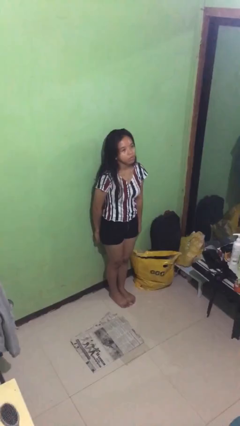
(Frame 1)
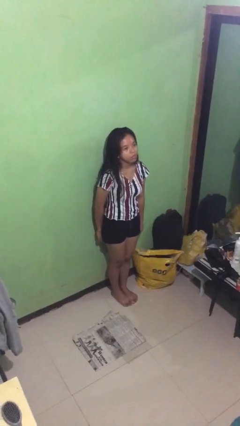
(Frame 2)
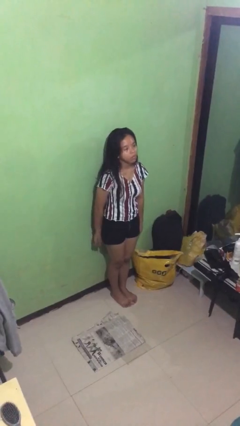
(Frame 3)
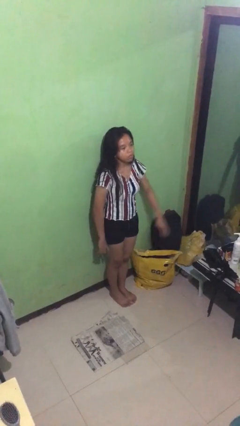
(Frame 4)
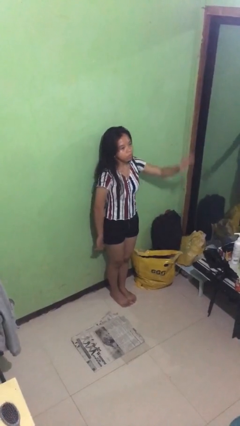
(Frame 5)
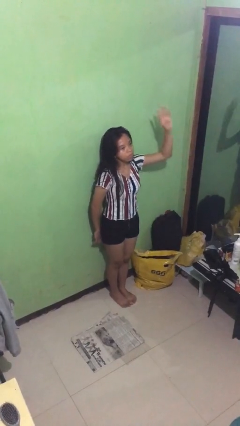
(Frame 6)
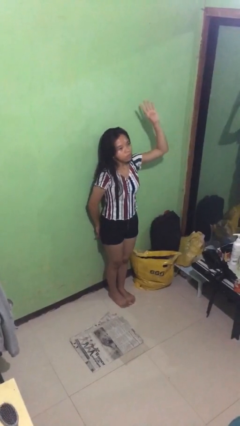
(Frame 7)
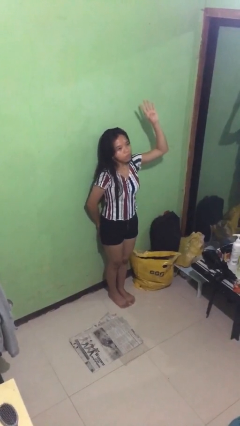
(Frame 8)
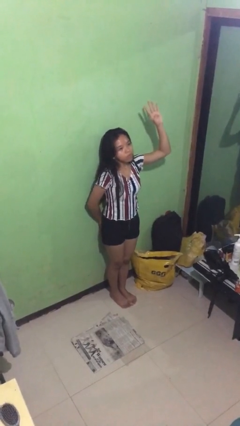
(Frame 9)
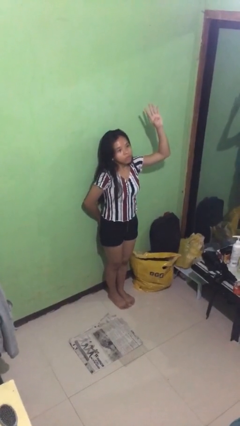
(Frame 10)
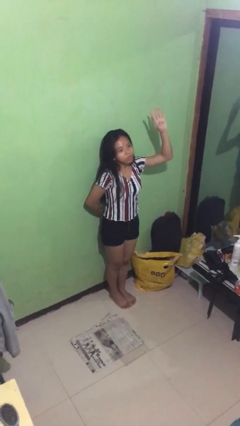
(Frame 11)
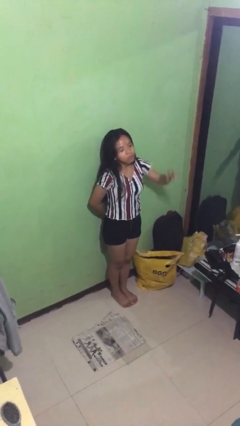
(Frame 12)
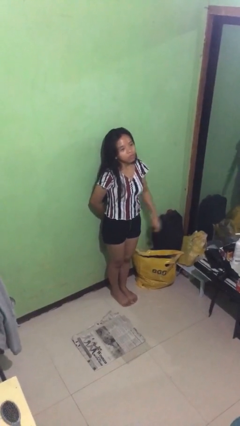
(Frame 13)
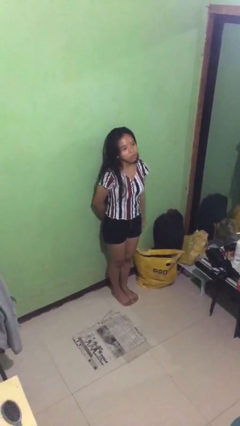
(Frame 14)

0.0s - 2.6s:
person gestures number four

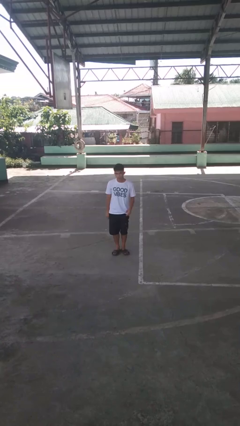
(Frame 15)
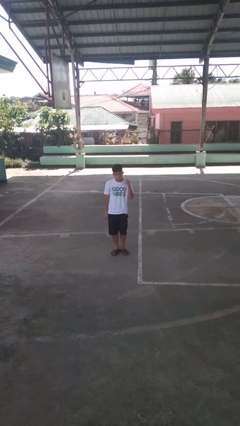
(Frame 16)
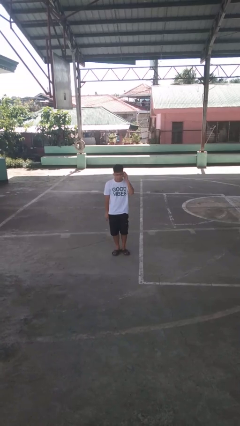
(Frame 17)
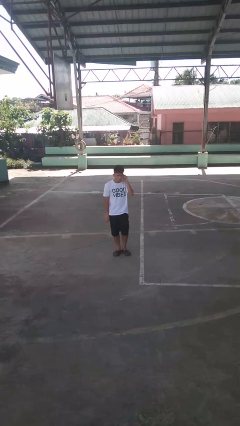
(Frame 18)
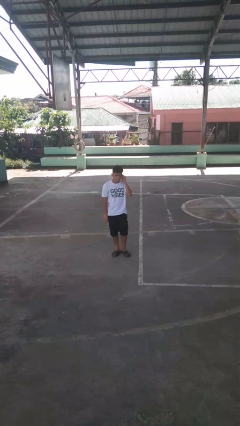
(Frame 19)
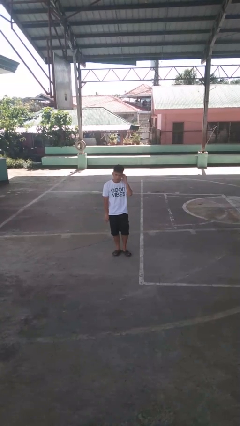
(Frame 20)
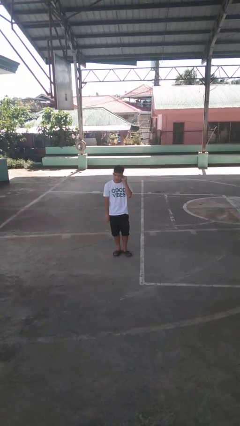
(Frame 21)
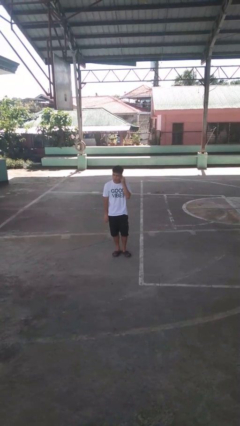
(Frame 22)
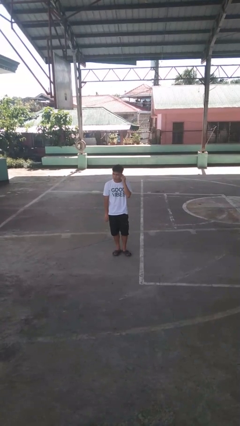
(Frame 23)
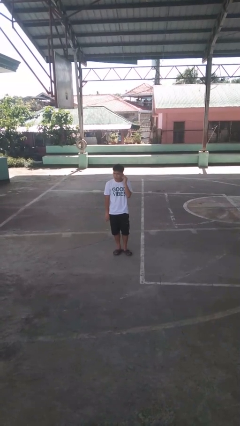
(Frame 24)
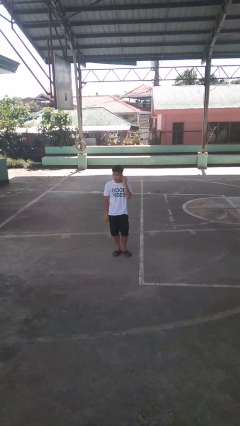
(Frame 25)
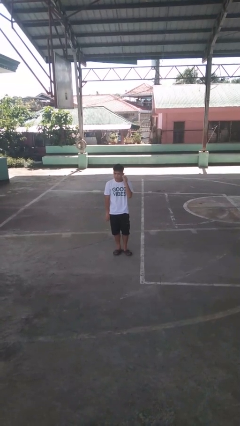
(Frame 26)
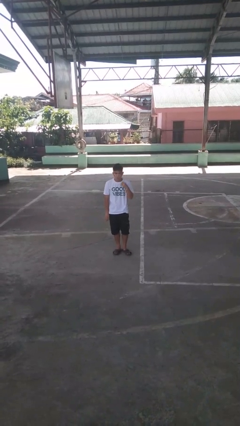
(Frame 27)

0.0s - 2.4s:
person touches earlobe

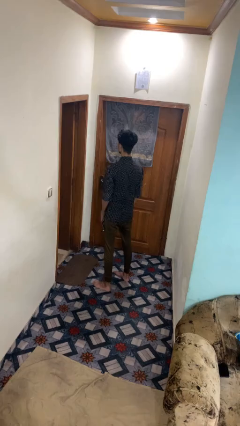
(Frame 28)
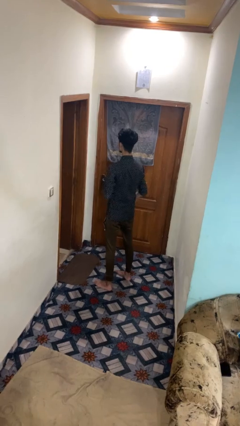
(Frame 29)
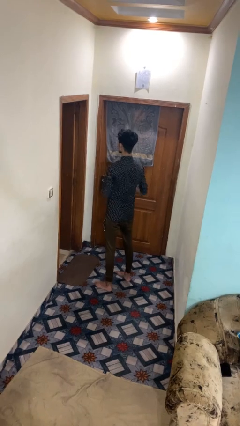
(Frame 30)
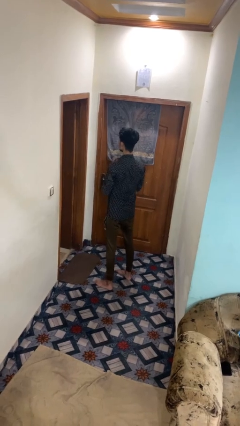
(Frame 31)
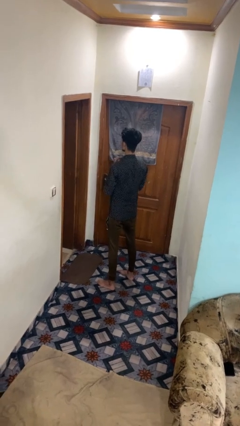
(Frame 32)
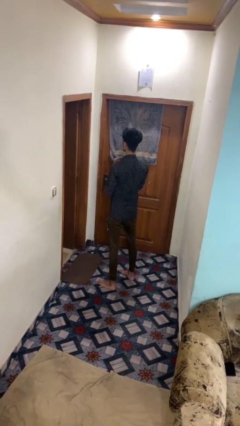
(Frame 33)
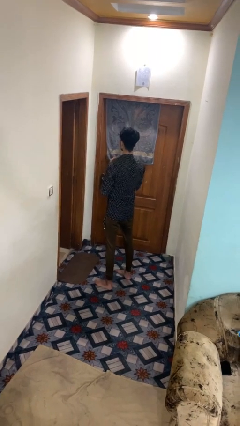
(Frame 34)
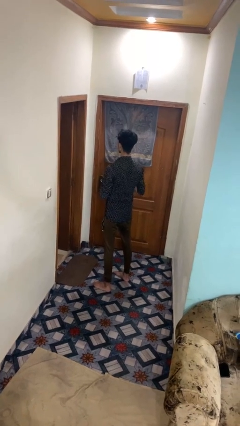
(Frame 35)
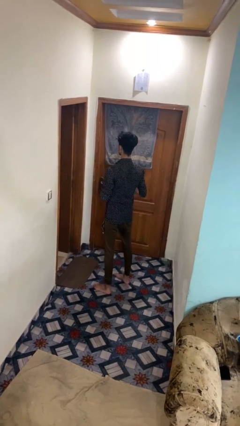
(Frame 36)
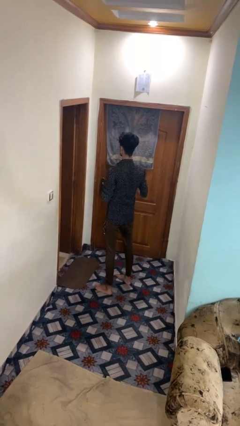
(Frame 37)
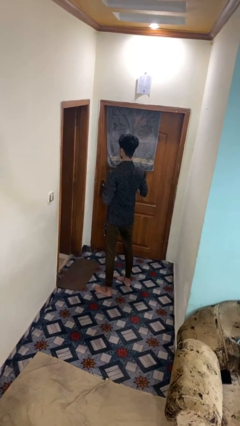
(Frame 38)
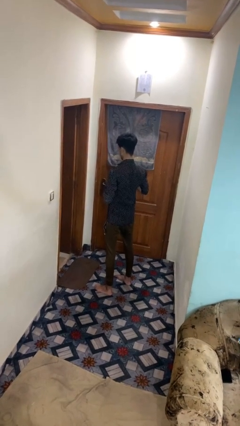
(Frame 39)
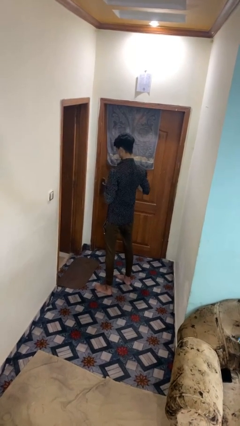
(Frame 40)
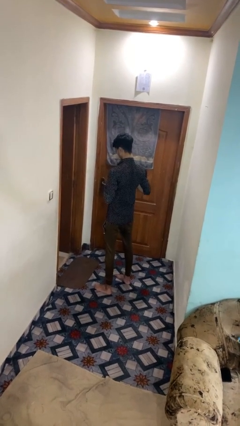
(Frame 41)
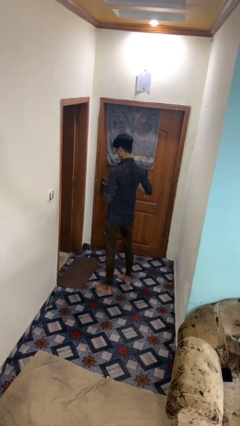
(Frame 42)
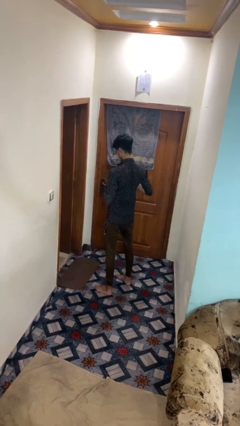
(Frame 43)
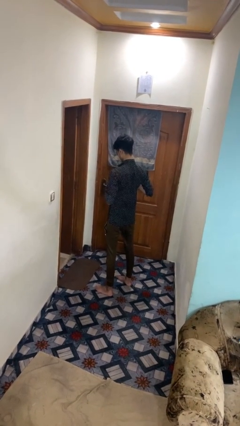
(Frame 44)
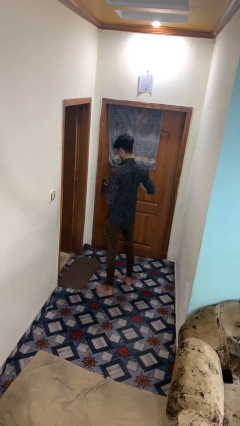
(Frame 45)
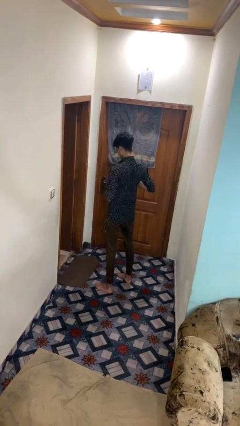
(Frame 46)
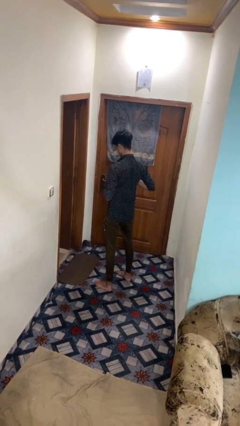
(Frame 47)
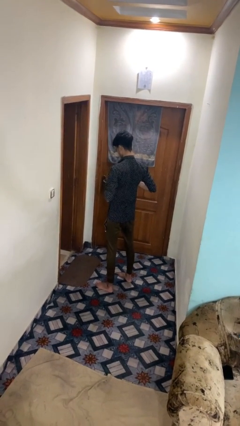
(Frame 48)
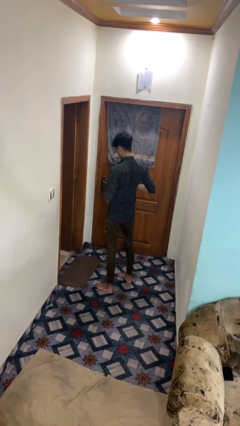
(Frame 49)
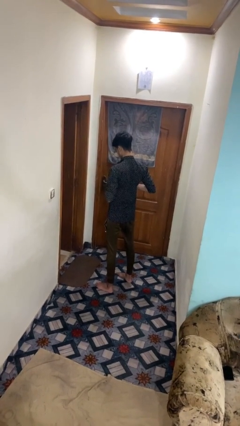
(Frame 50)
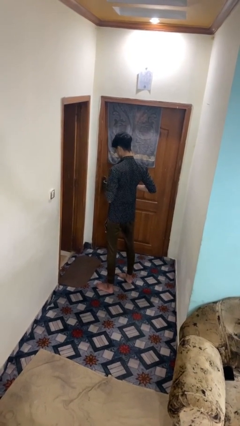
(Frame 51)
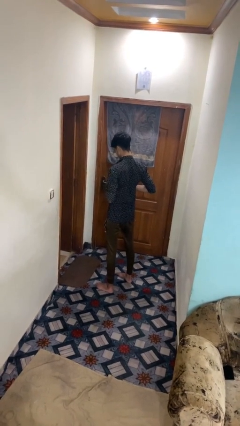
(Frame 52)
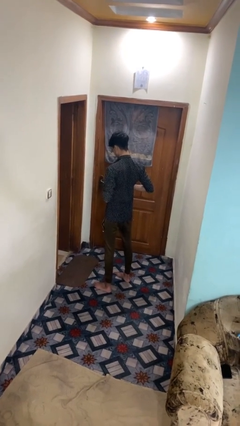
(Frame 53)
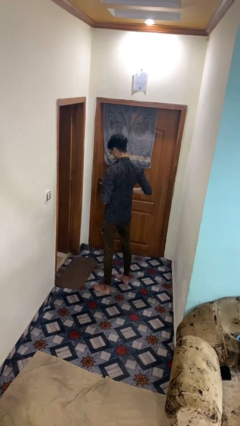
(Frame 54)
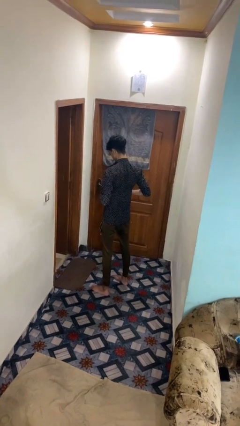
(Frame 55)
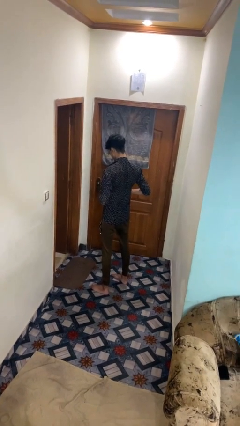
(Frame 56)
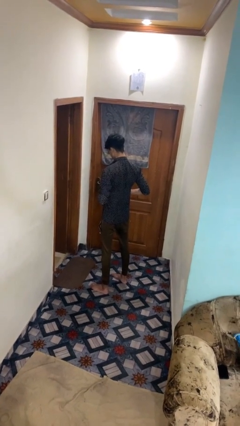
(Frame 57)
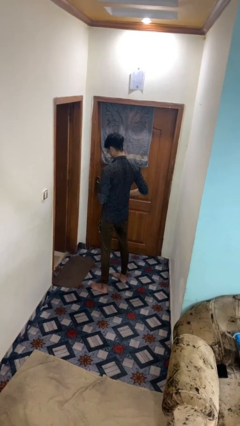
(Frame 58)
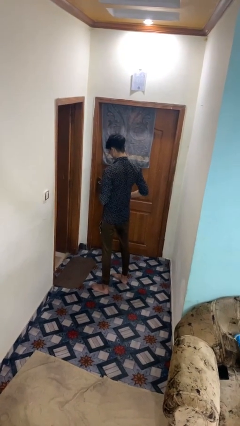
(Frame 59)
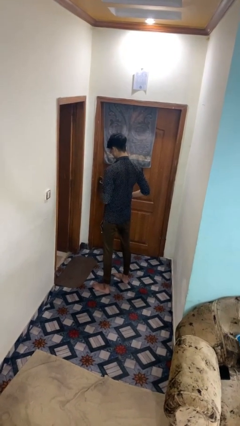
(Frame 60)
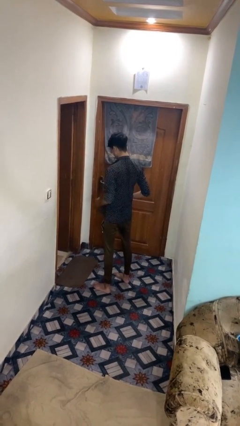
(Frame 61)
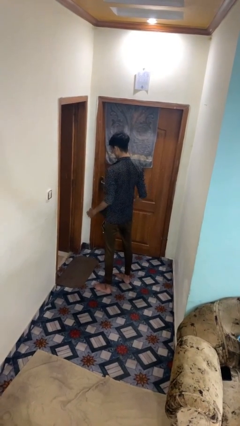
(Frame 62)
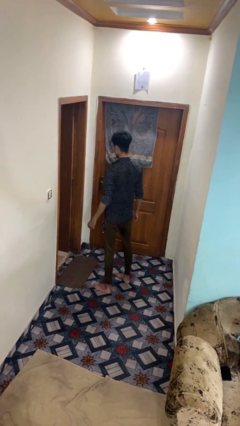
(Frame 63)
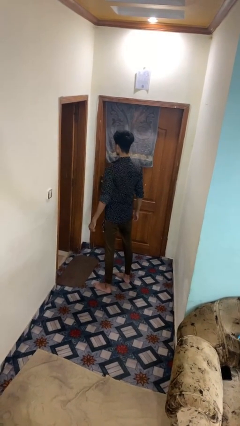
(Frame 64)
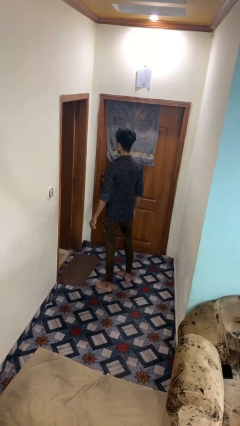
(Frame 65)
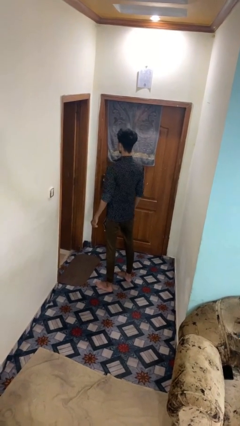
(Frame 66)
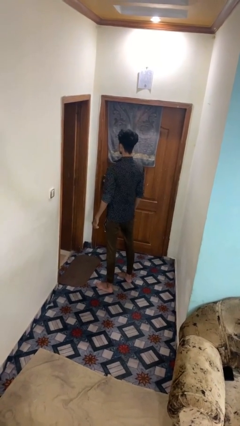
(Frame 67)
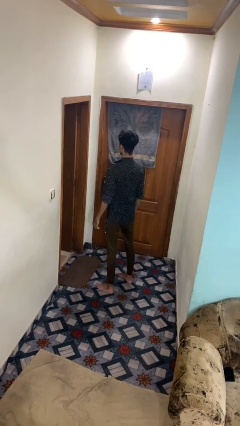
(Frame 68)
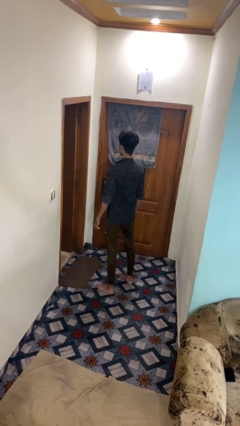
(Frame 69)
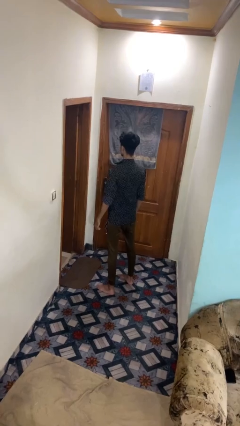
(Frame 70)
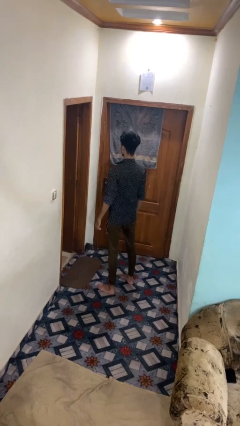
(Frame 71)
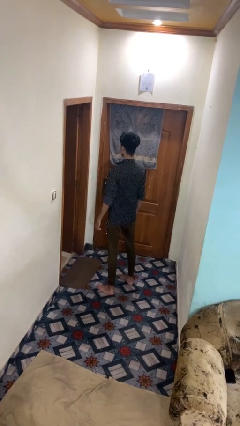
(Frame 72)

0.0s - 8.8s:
person unbuttons shirt

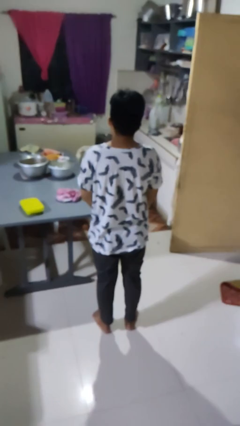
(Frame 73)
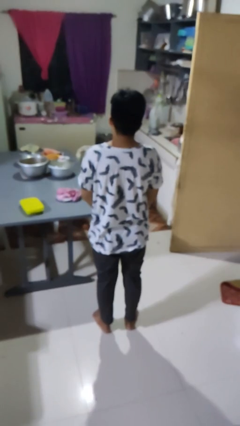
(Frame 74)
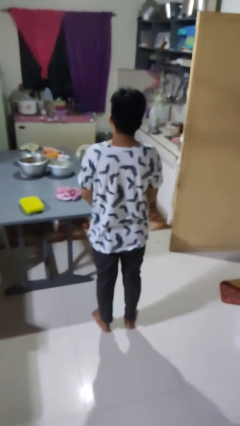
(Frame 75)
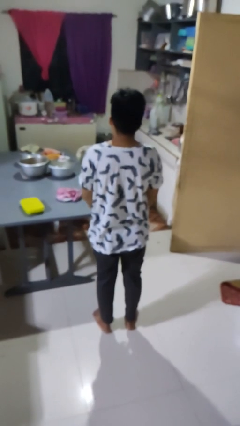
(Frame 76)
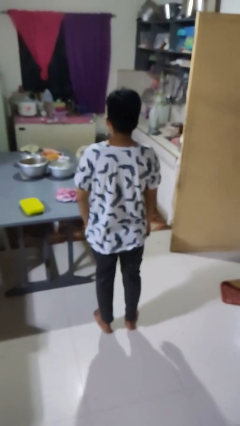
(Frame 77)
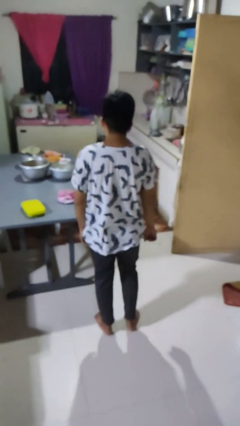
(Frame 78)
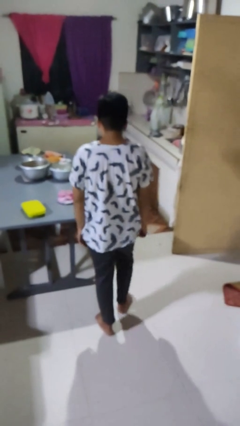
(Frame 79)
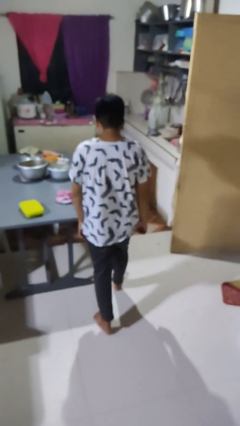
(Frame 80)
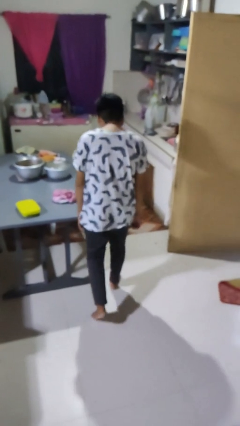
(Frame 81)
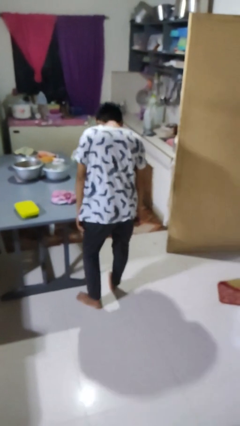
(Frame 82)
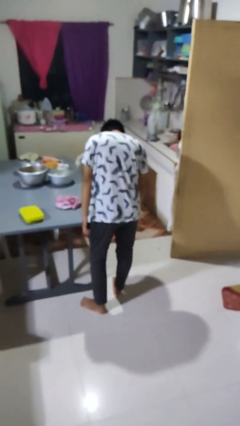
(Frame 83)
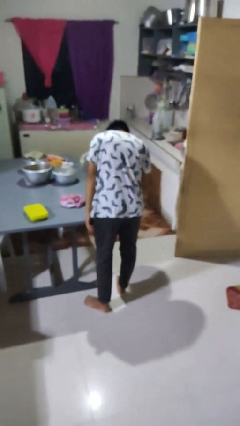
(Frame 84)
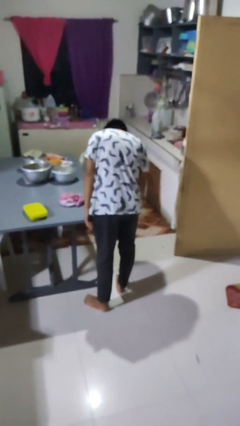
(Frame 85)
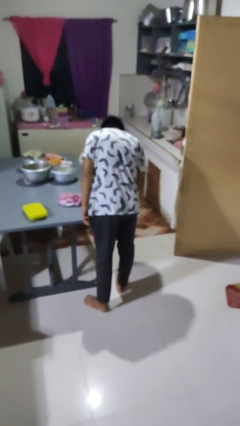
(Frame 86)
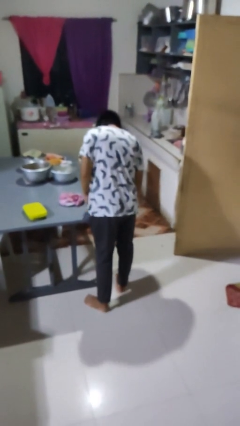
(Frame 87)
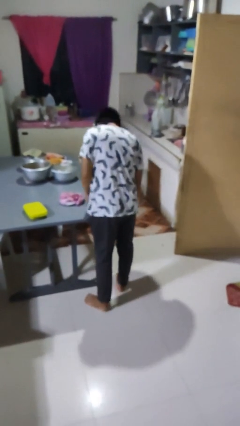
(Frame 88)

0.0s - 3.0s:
person bumps into table

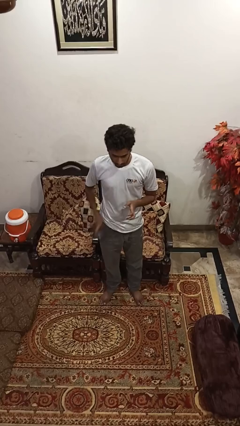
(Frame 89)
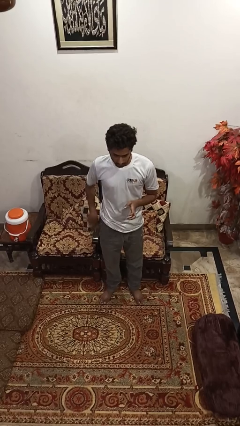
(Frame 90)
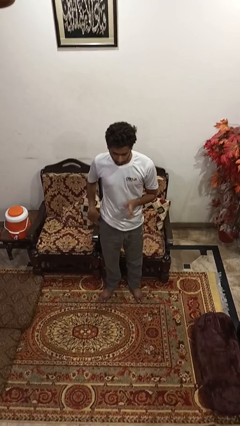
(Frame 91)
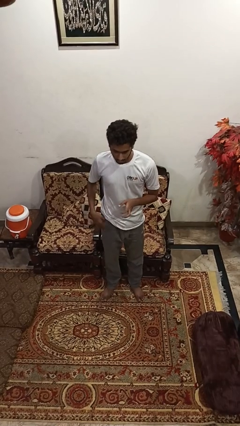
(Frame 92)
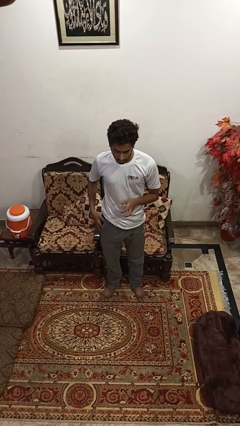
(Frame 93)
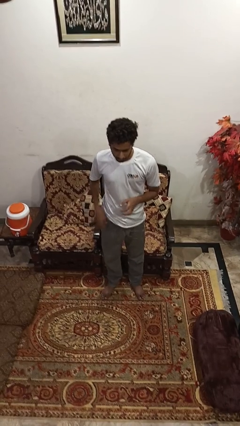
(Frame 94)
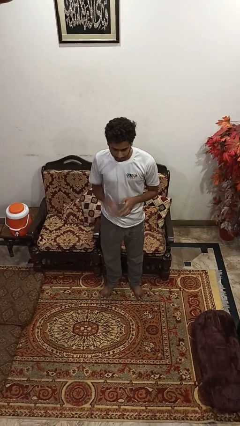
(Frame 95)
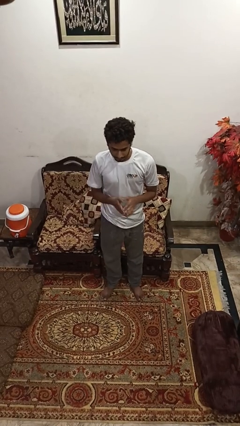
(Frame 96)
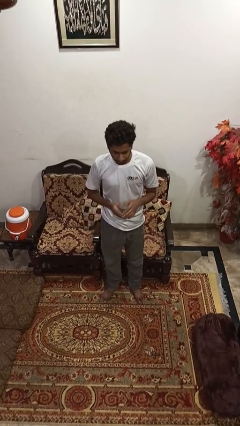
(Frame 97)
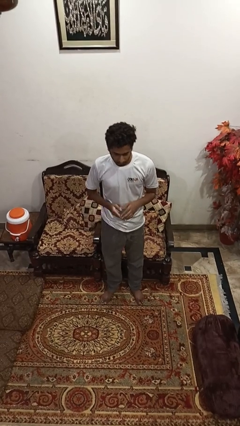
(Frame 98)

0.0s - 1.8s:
person puts phone into pocket
